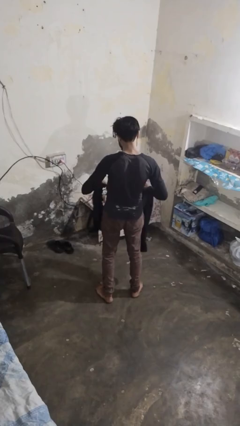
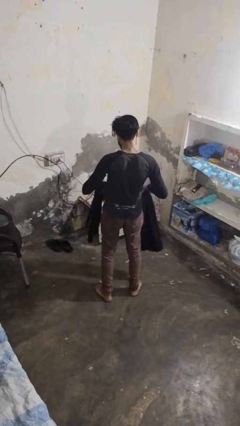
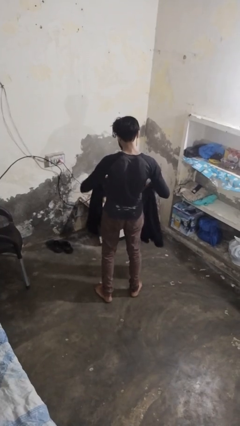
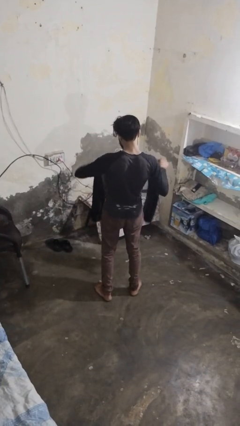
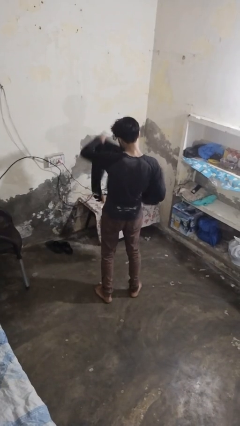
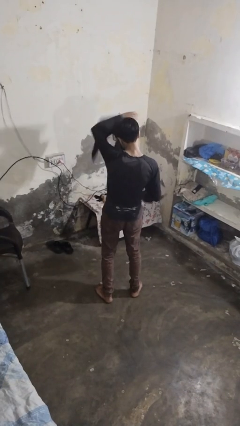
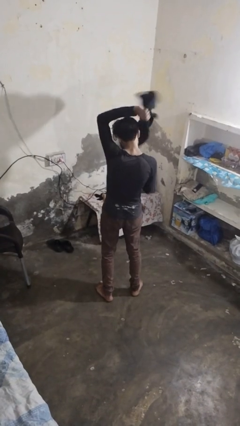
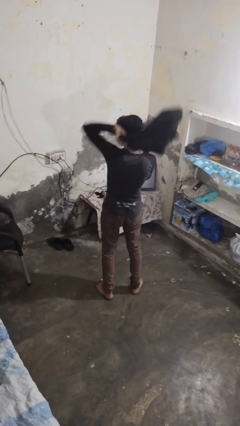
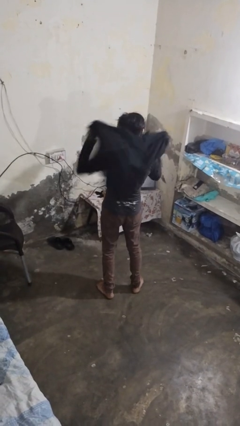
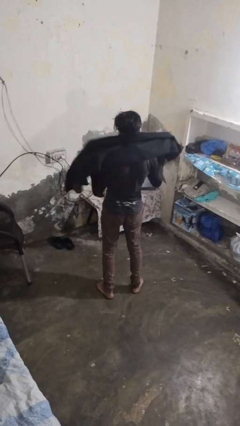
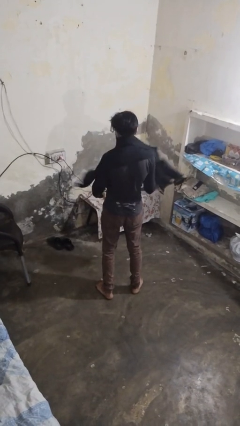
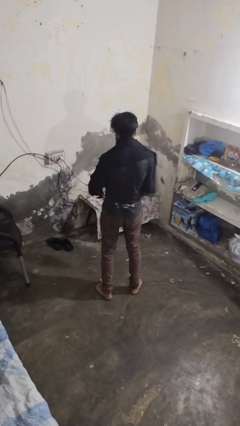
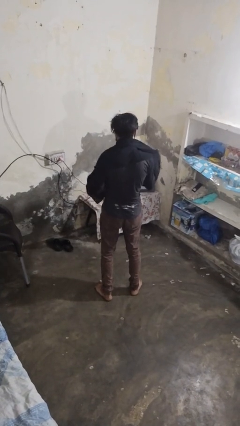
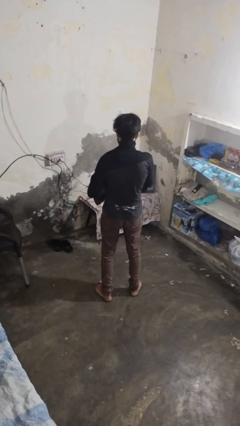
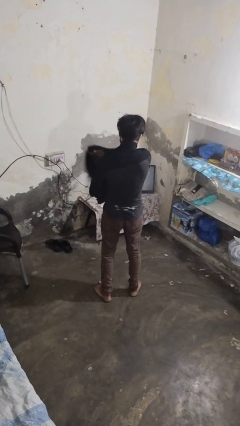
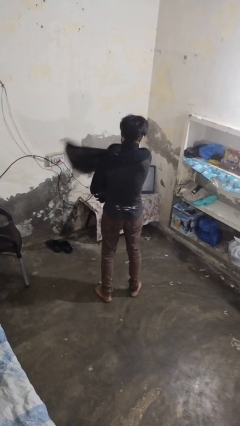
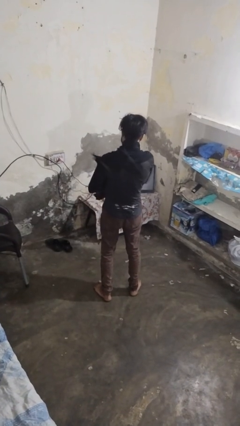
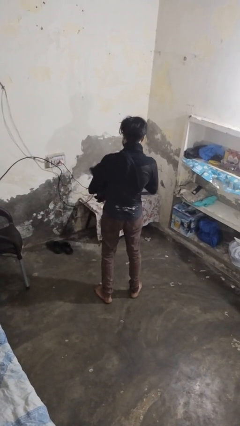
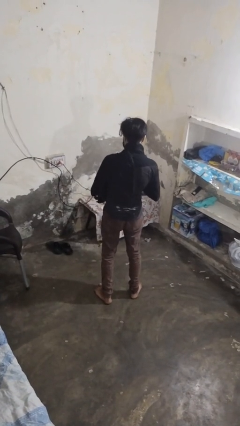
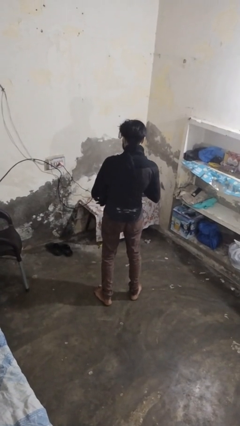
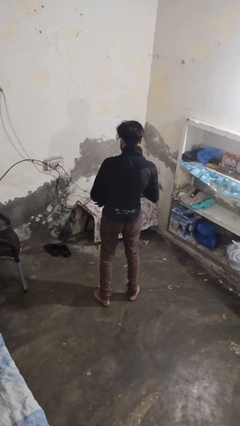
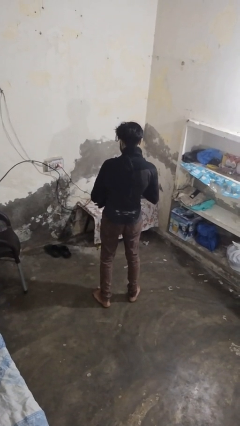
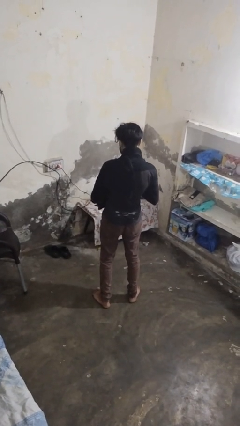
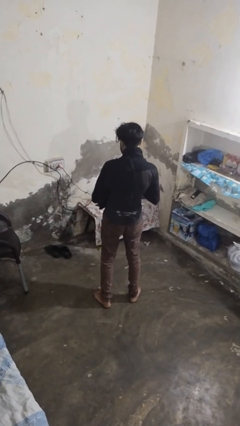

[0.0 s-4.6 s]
person puts on scarf

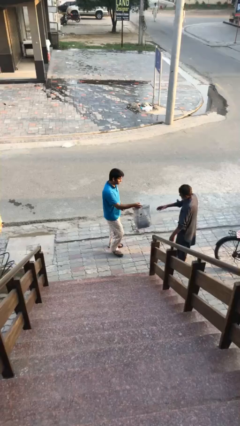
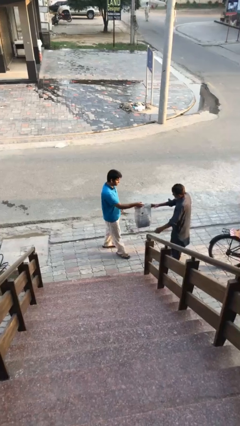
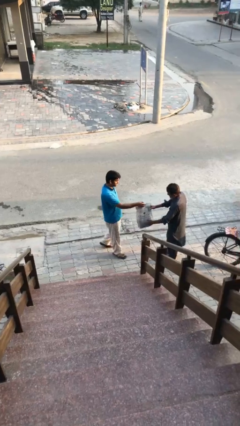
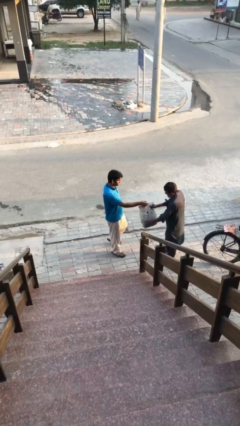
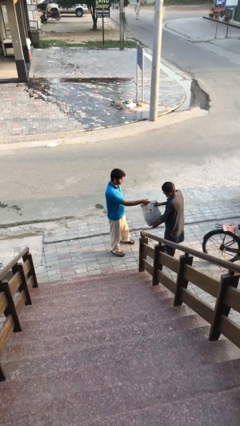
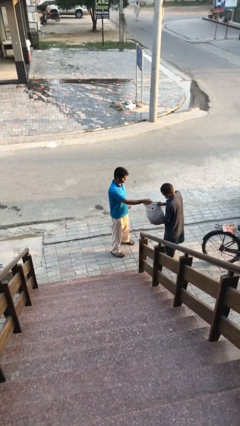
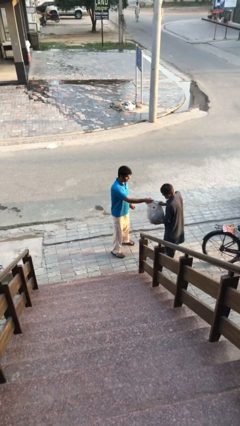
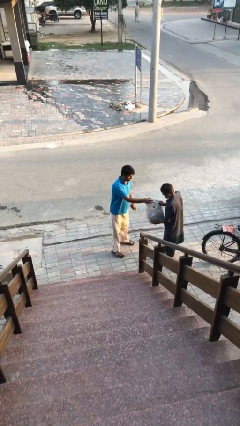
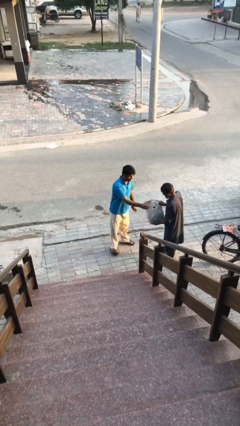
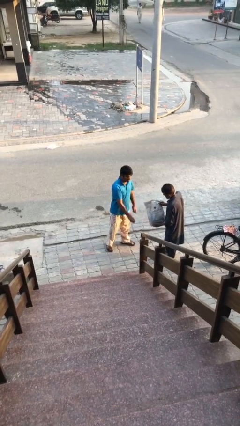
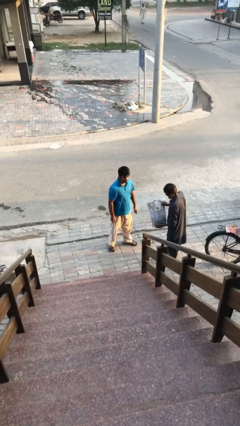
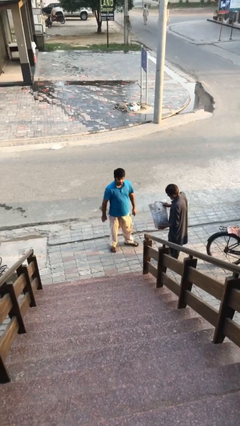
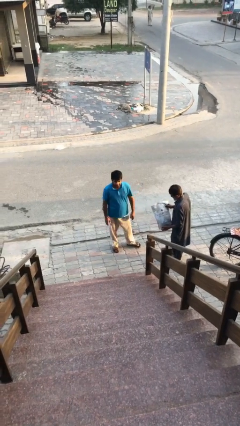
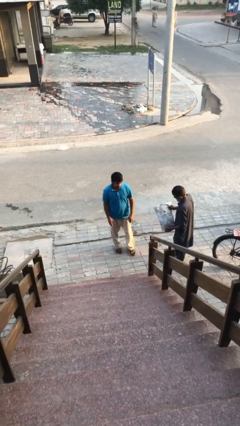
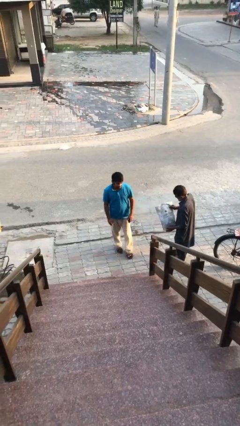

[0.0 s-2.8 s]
person transfers object to person

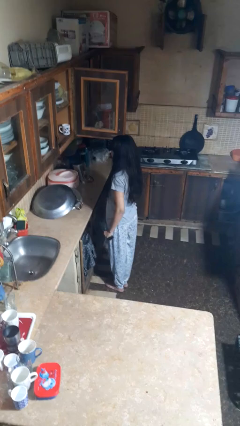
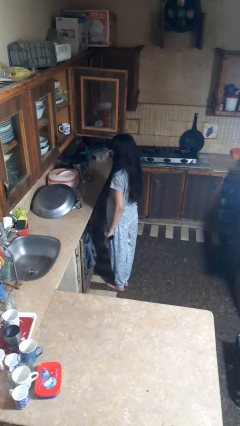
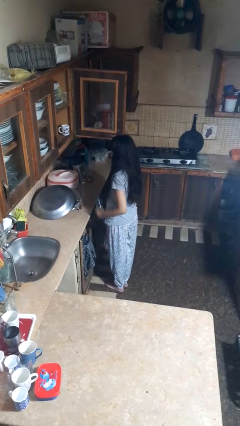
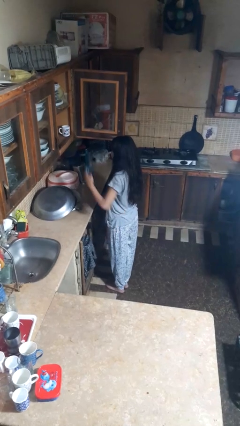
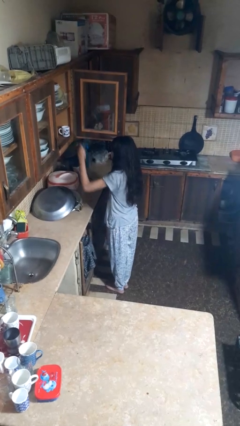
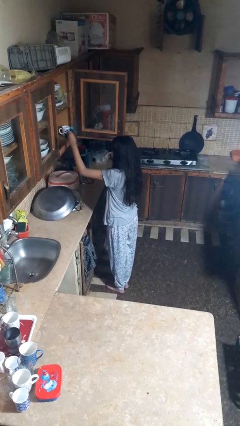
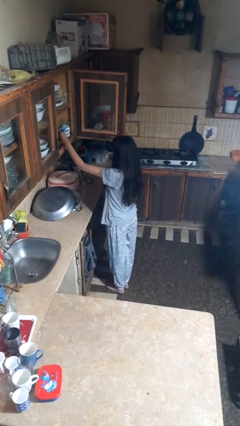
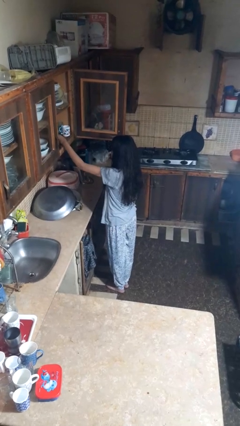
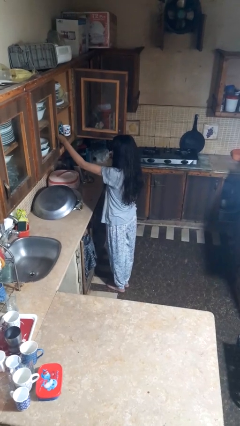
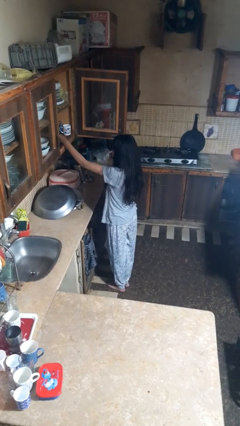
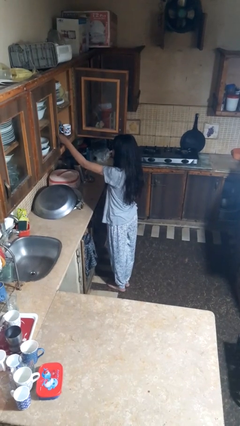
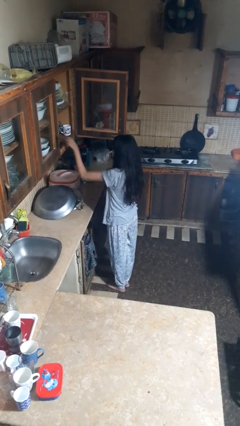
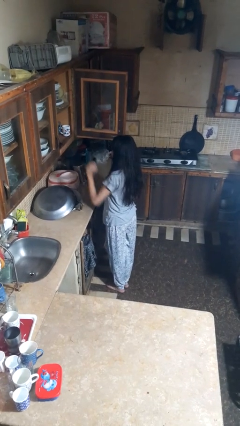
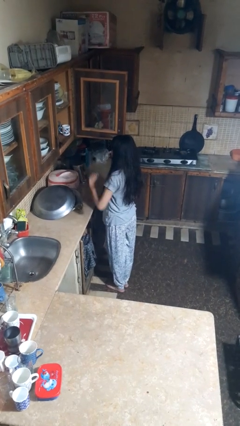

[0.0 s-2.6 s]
person puts object in cabinet

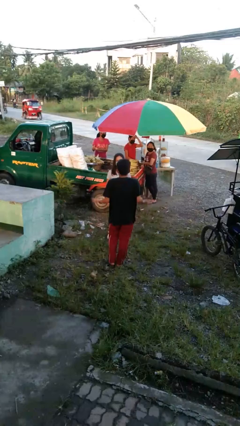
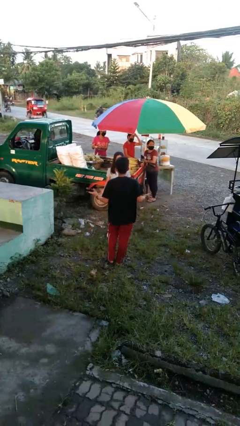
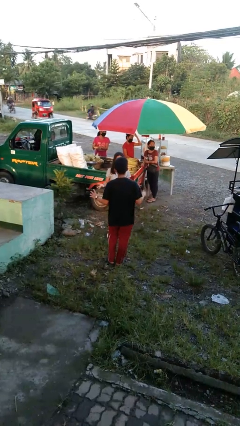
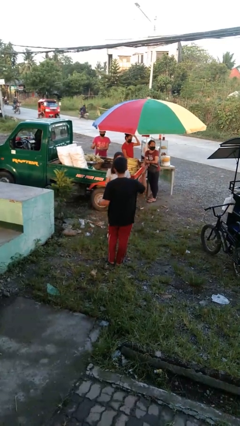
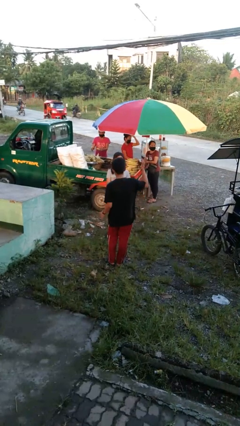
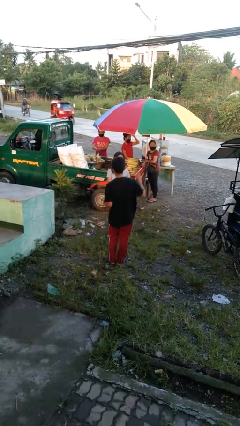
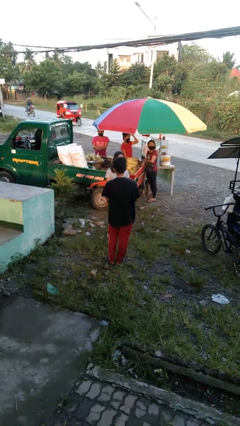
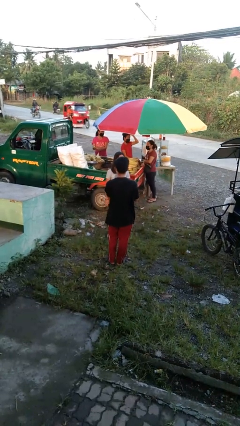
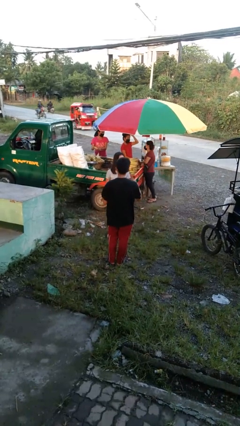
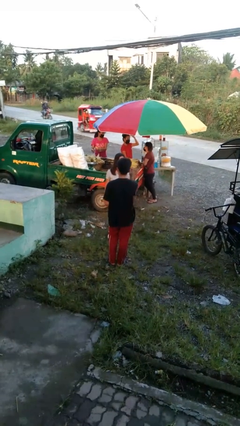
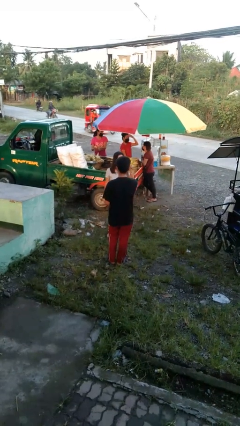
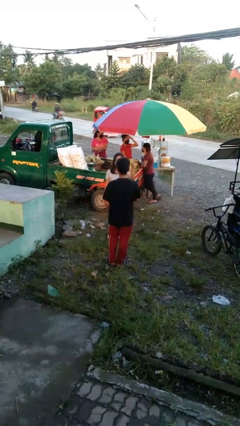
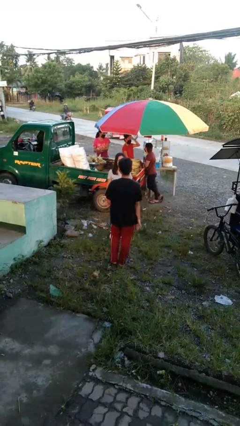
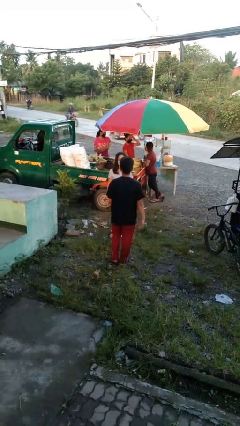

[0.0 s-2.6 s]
person talks to person

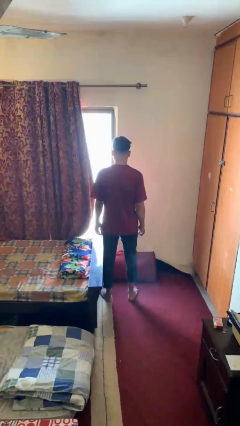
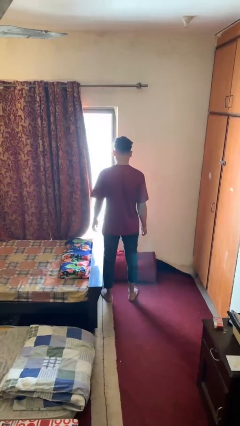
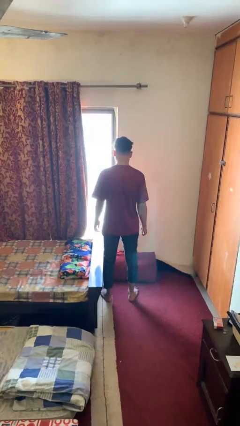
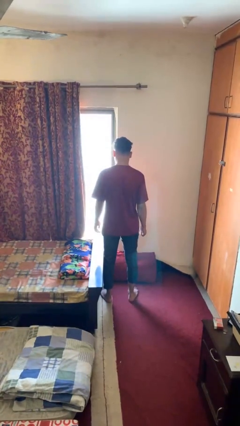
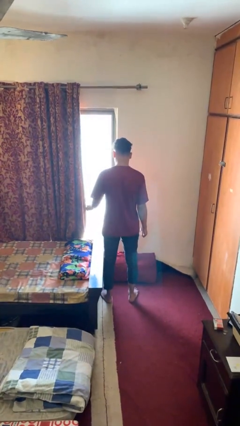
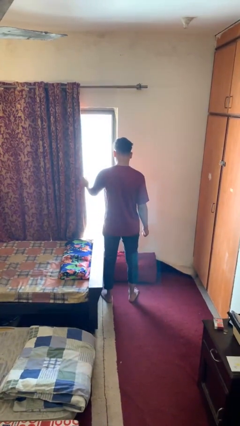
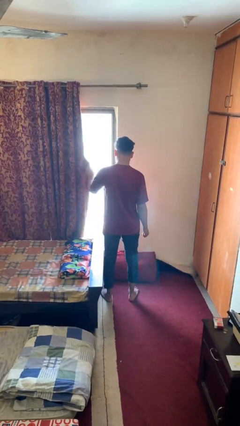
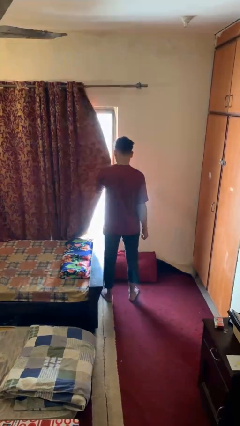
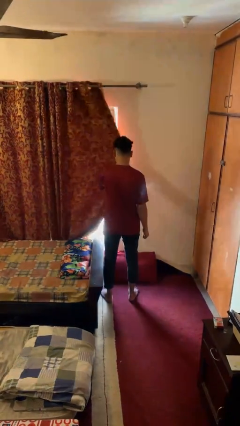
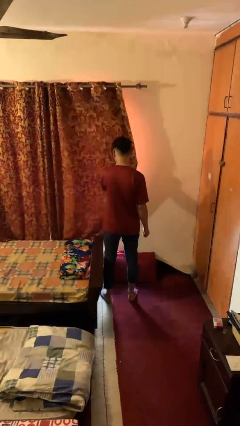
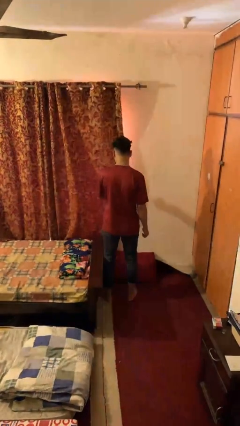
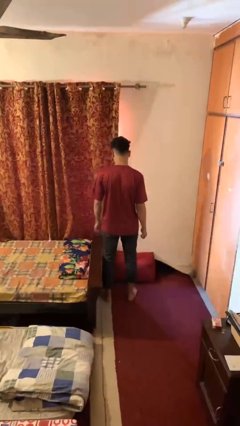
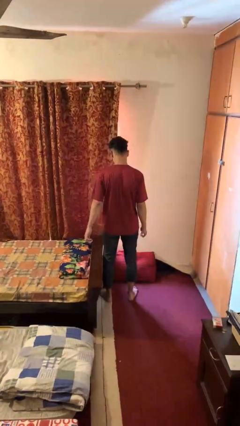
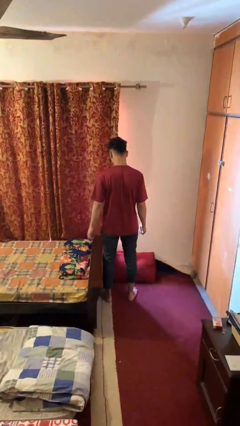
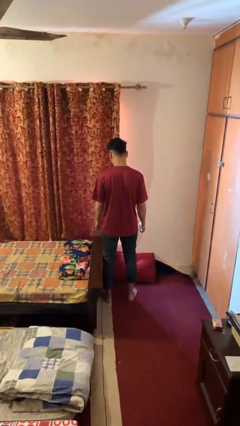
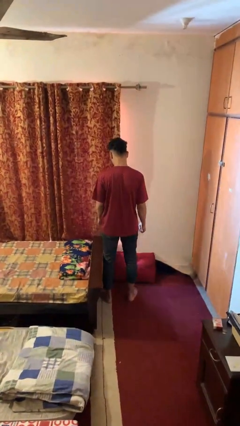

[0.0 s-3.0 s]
person closes curtains

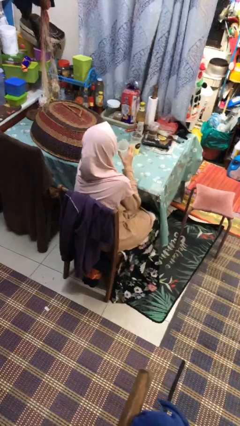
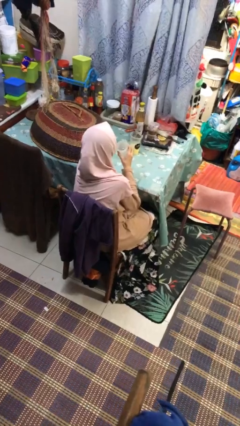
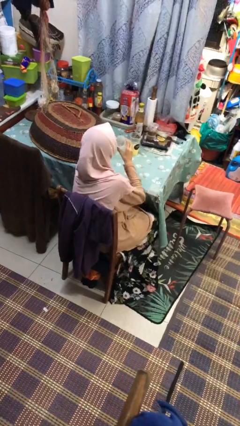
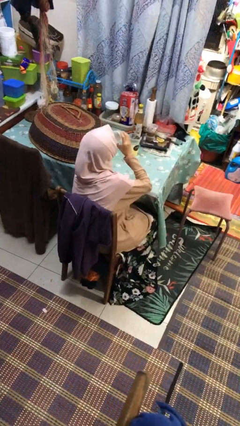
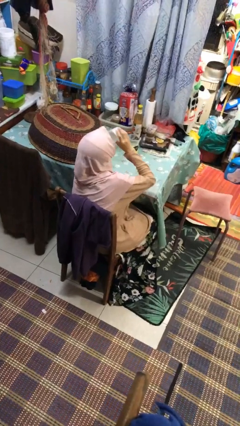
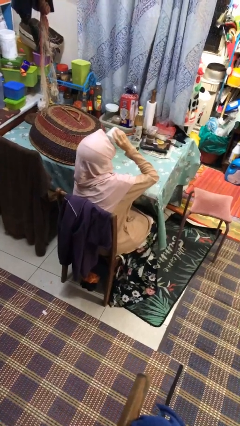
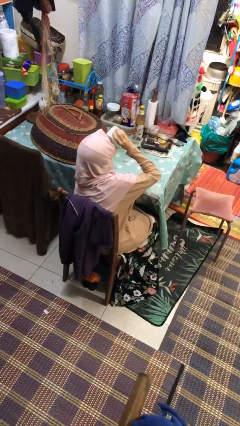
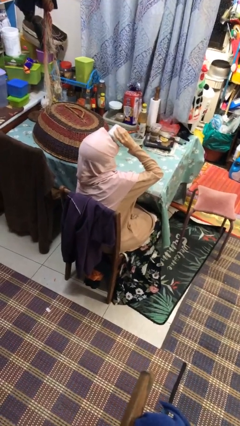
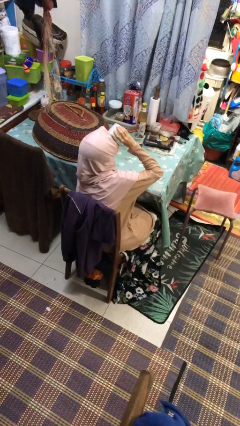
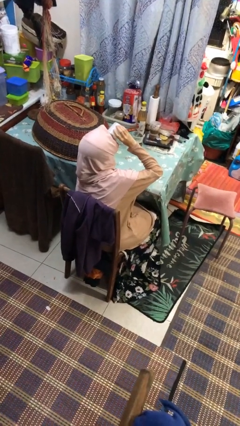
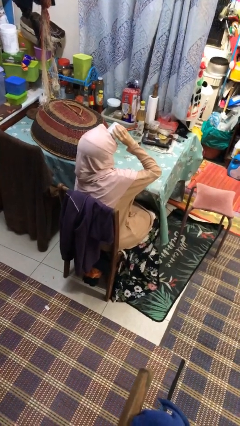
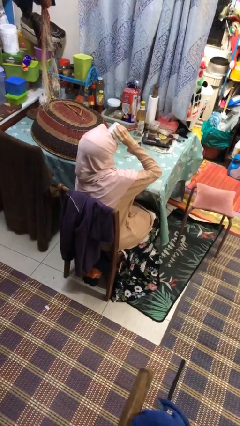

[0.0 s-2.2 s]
person drinks from shotglass

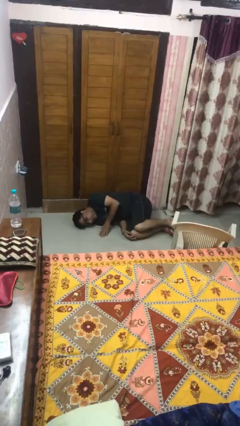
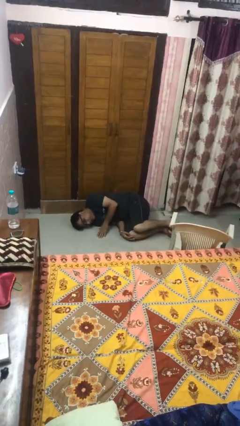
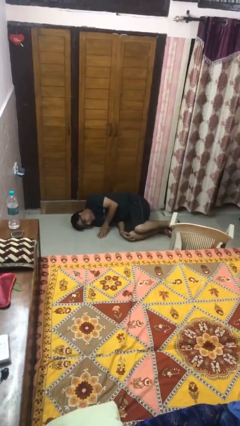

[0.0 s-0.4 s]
person stands up from floor
